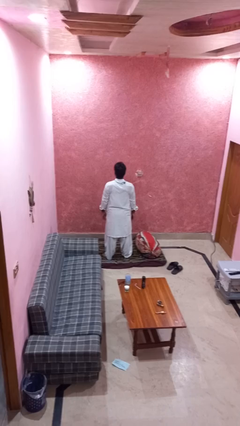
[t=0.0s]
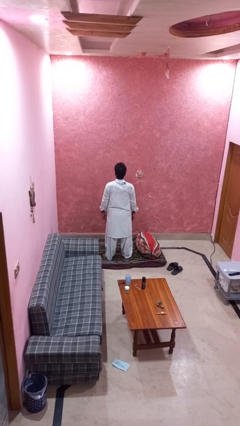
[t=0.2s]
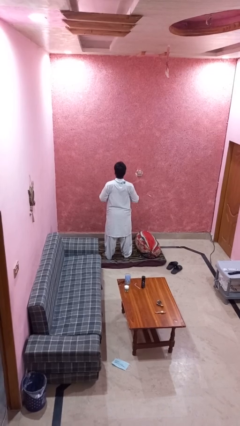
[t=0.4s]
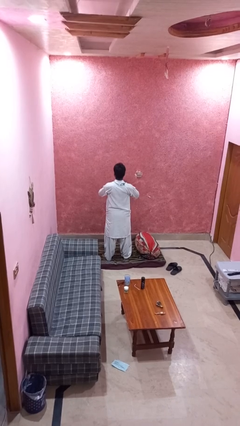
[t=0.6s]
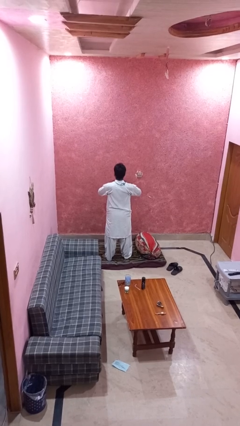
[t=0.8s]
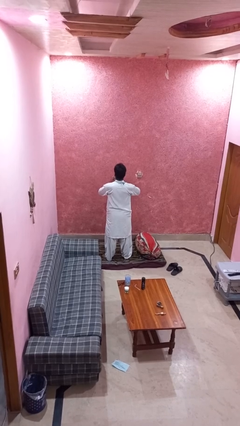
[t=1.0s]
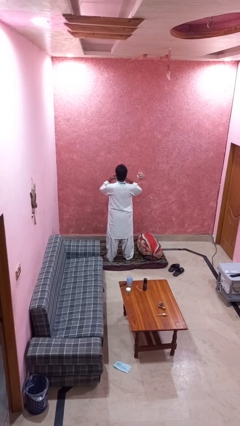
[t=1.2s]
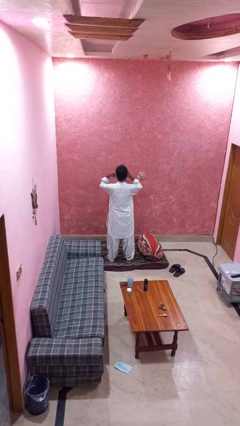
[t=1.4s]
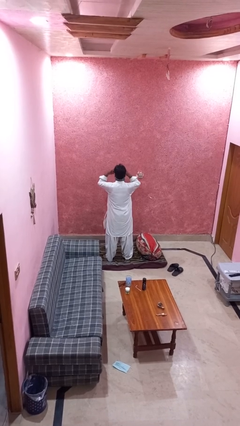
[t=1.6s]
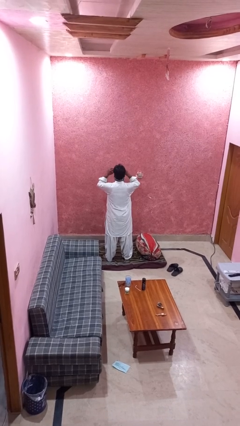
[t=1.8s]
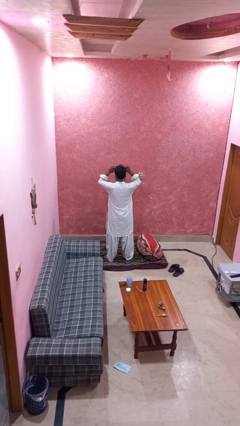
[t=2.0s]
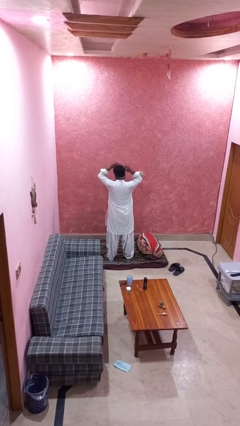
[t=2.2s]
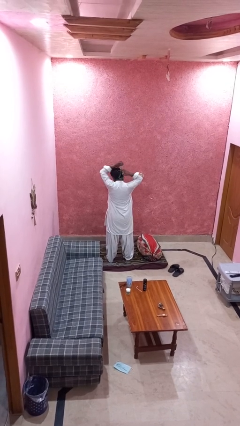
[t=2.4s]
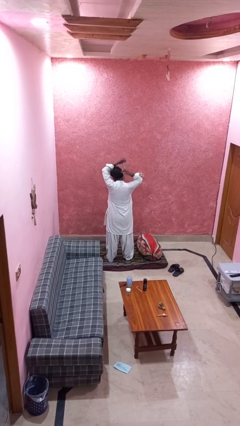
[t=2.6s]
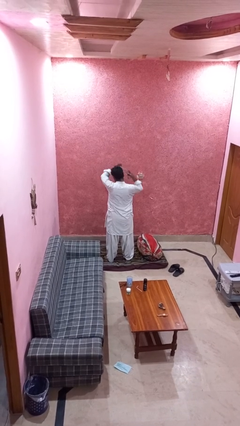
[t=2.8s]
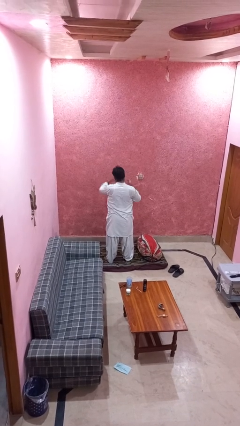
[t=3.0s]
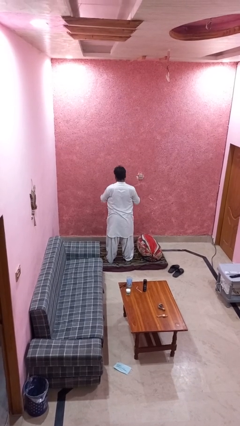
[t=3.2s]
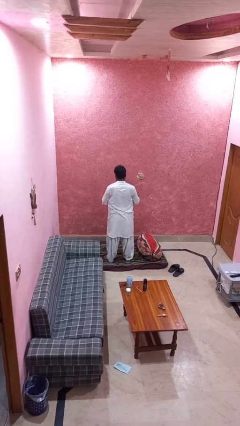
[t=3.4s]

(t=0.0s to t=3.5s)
person takes off necklace

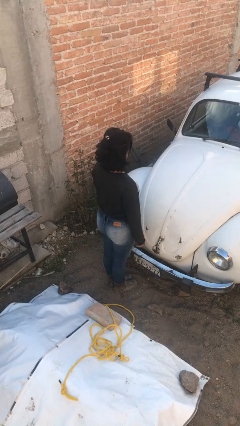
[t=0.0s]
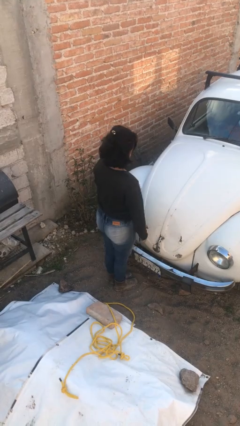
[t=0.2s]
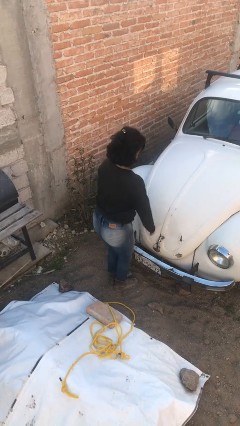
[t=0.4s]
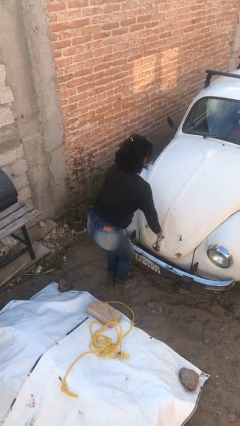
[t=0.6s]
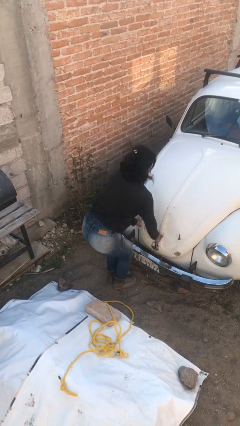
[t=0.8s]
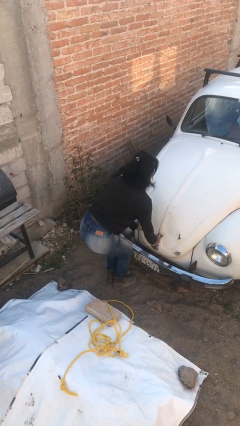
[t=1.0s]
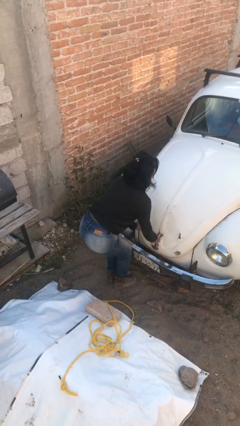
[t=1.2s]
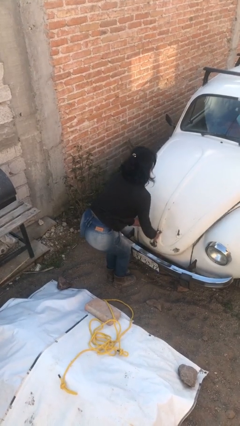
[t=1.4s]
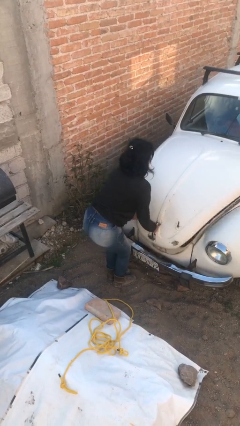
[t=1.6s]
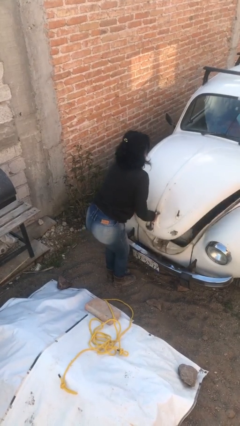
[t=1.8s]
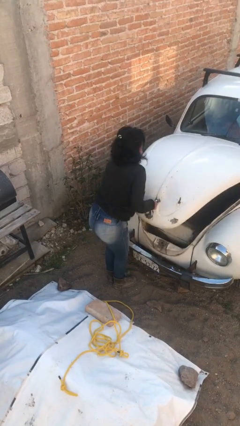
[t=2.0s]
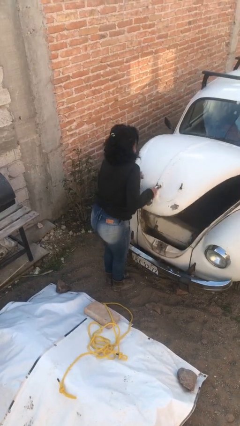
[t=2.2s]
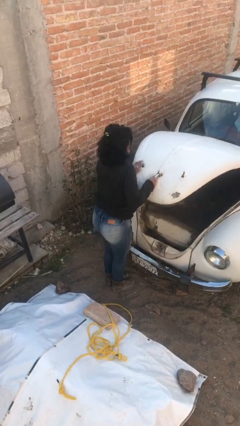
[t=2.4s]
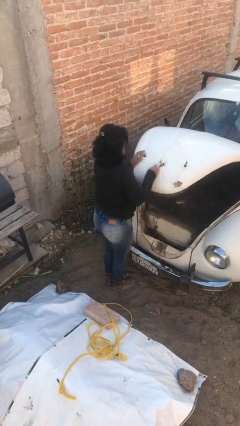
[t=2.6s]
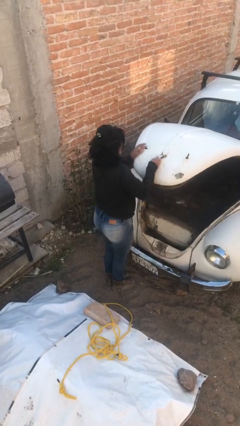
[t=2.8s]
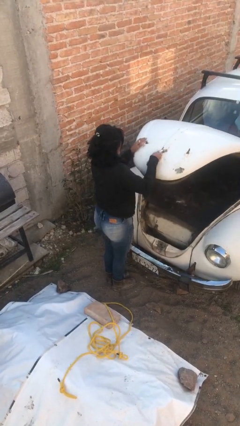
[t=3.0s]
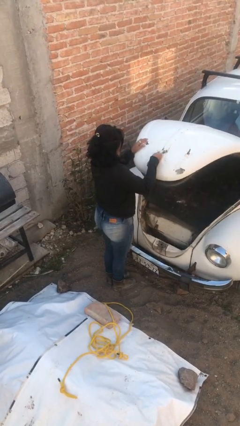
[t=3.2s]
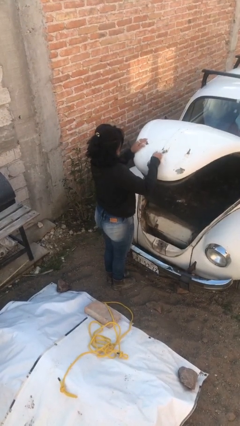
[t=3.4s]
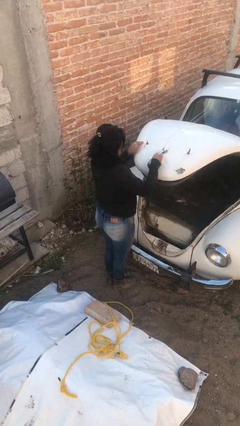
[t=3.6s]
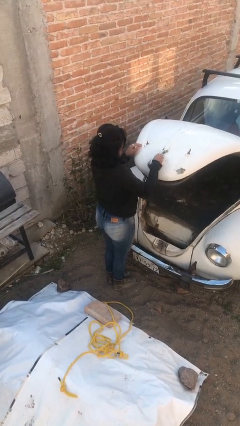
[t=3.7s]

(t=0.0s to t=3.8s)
person opens car trunk

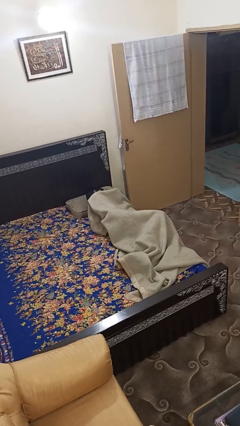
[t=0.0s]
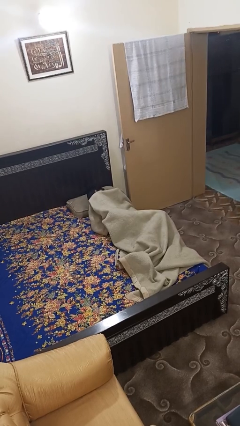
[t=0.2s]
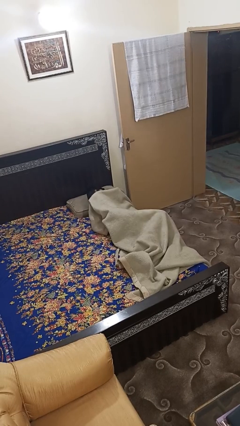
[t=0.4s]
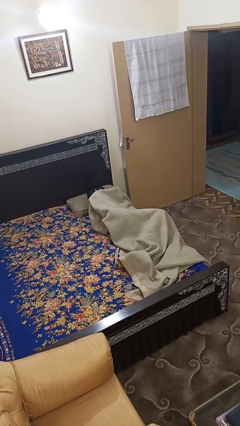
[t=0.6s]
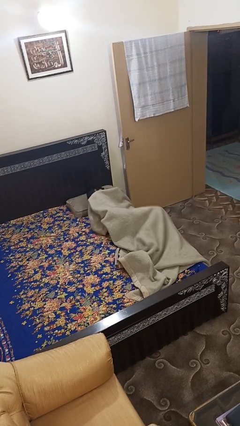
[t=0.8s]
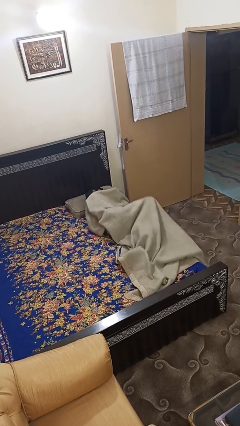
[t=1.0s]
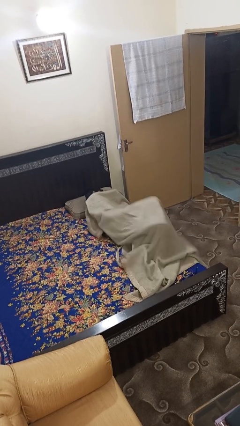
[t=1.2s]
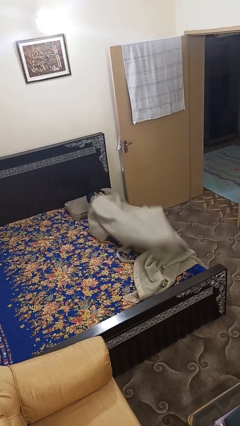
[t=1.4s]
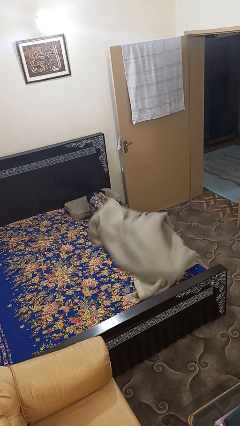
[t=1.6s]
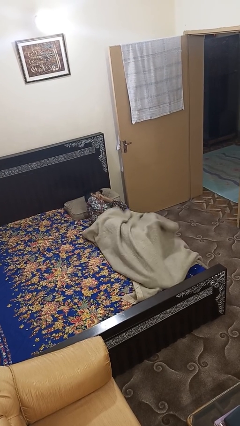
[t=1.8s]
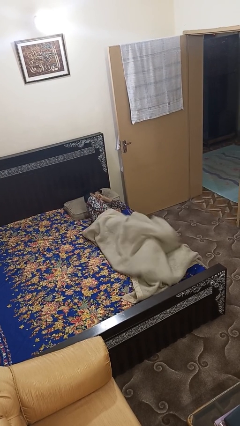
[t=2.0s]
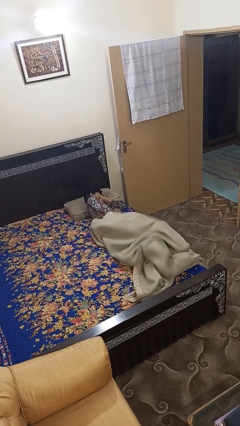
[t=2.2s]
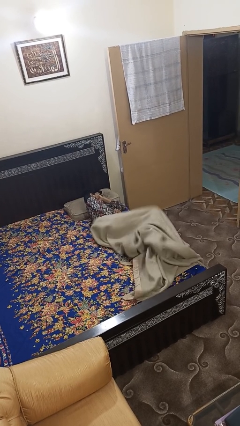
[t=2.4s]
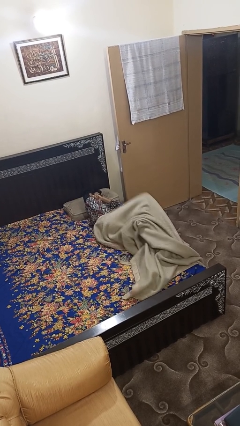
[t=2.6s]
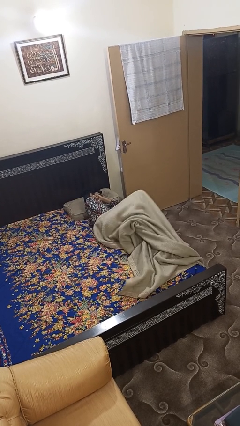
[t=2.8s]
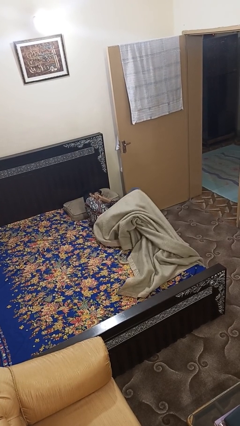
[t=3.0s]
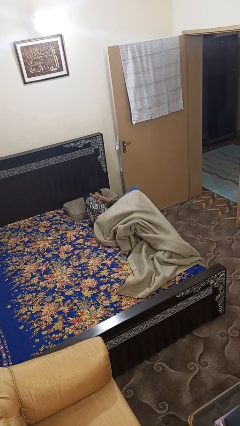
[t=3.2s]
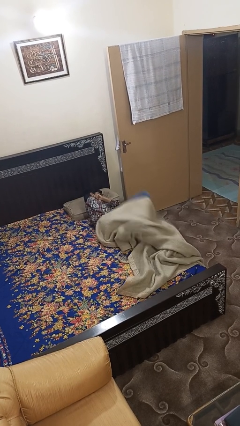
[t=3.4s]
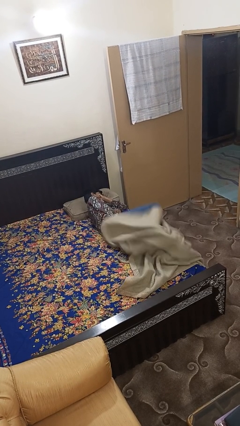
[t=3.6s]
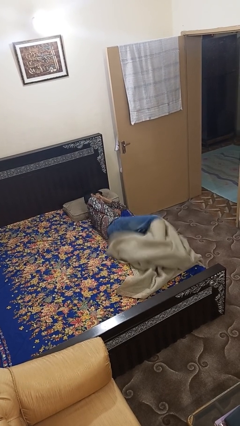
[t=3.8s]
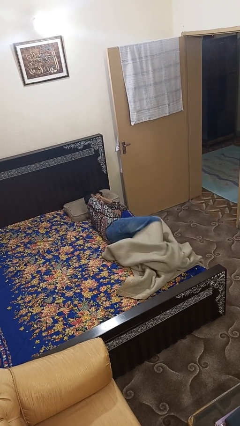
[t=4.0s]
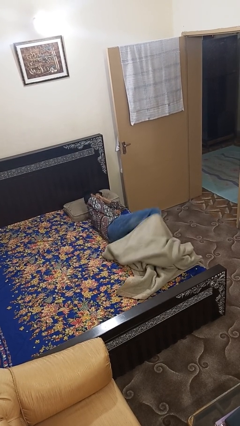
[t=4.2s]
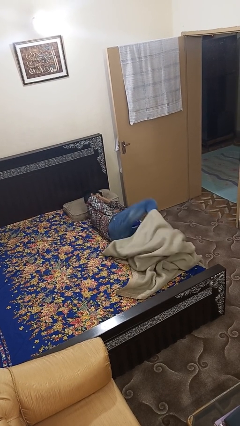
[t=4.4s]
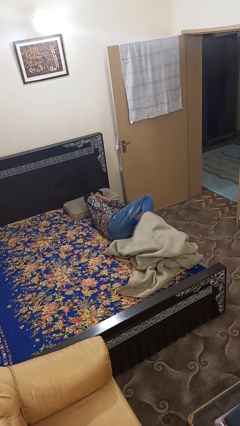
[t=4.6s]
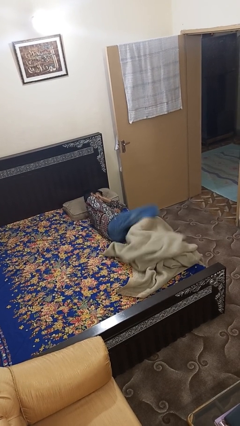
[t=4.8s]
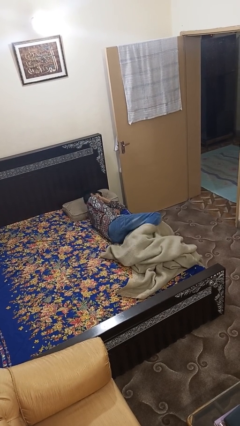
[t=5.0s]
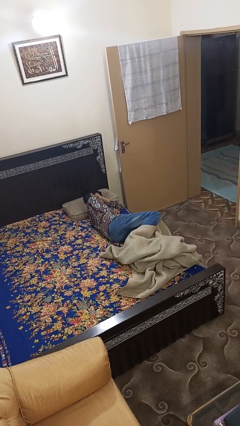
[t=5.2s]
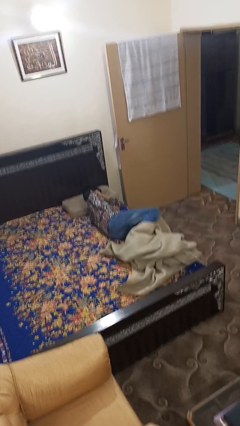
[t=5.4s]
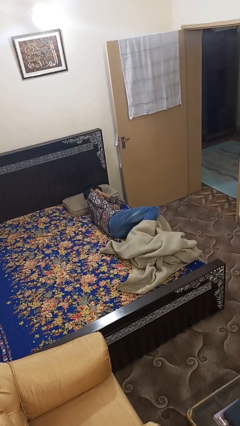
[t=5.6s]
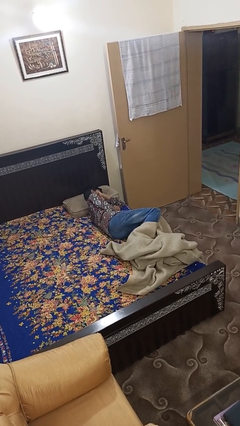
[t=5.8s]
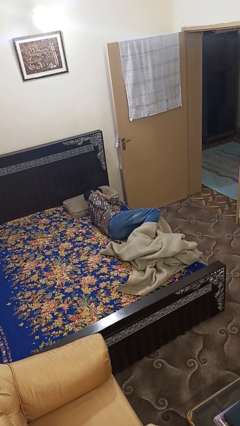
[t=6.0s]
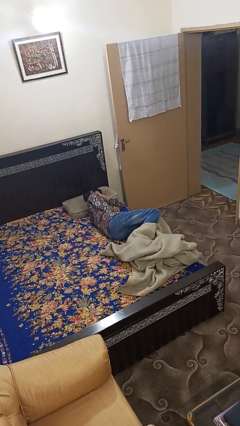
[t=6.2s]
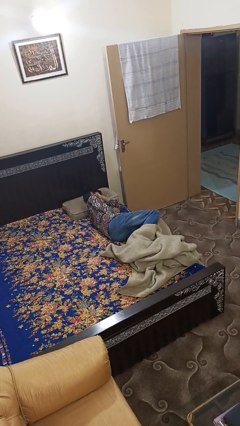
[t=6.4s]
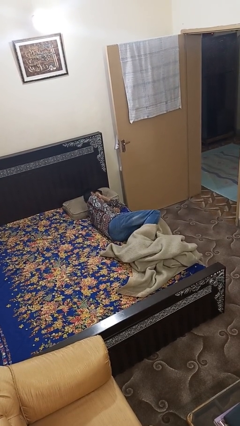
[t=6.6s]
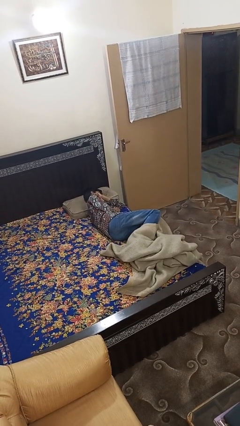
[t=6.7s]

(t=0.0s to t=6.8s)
person uncovers with bedsheets

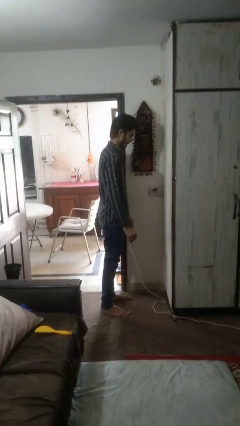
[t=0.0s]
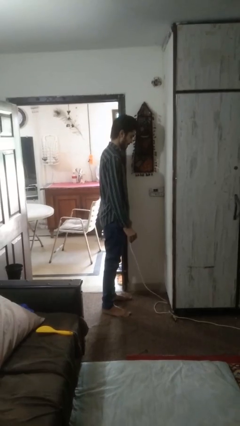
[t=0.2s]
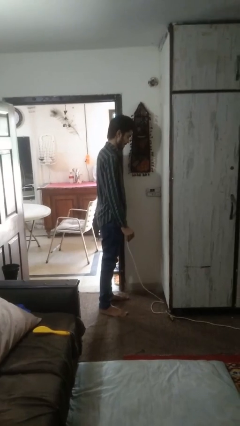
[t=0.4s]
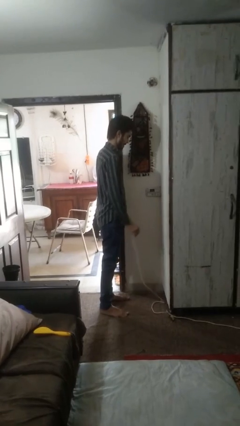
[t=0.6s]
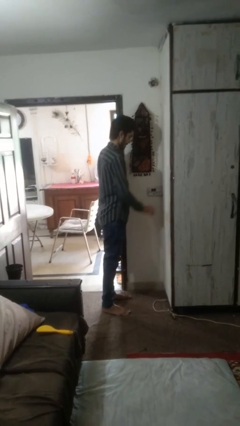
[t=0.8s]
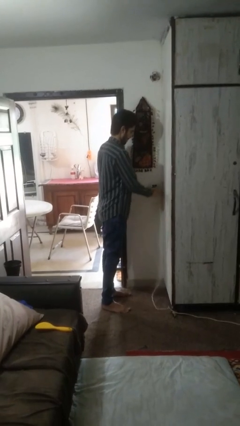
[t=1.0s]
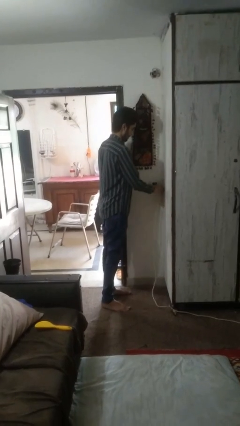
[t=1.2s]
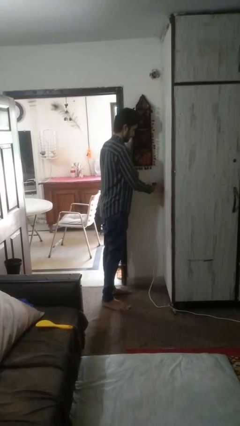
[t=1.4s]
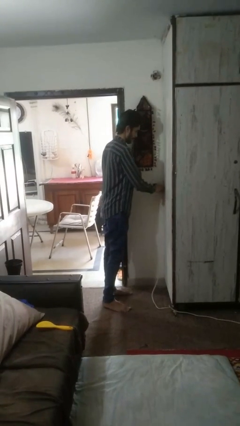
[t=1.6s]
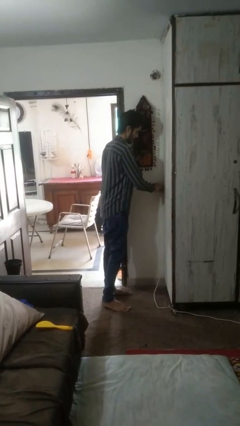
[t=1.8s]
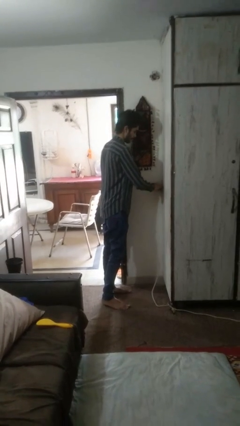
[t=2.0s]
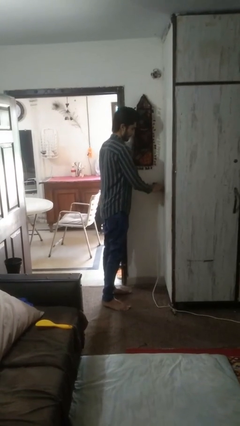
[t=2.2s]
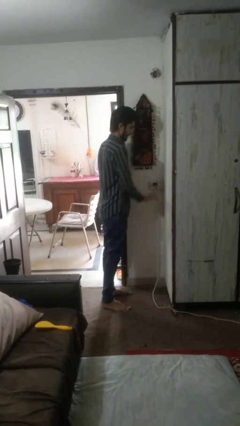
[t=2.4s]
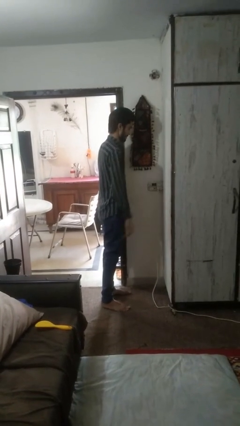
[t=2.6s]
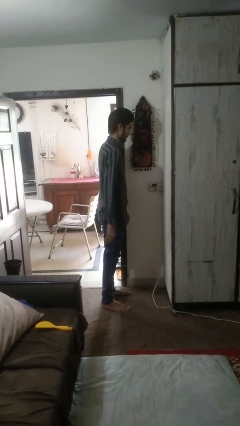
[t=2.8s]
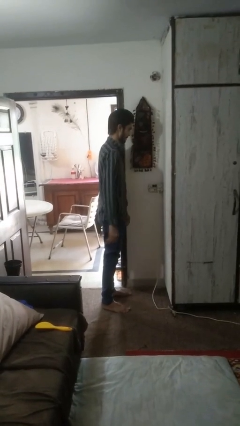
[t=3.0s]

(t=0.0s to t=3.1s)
person plugs into electrical socket

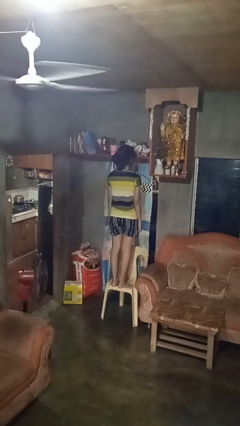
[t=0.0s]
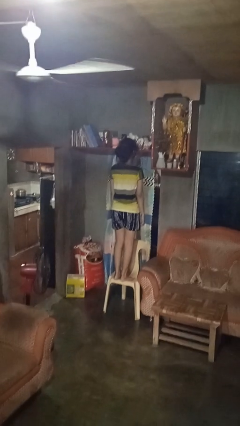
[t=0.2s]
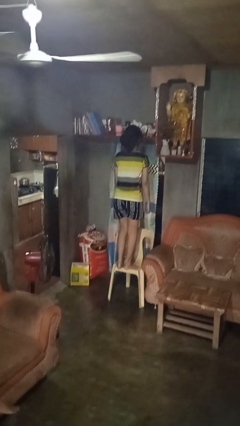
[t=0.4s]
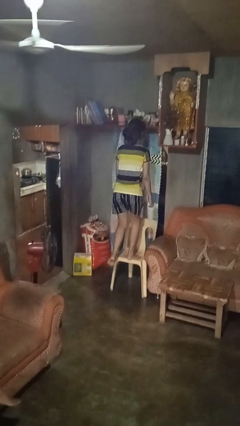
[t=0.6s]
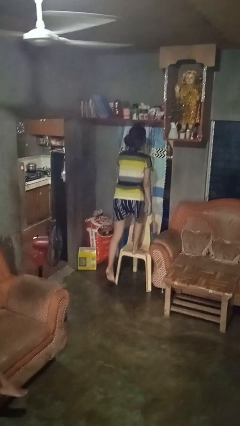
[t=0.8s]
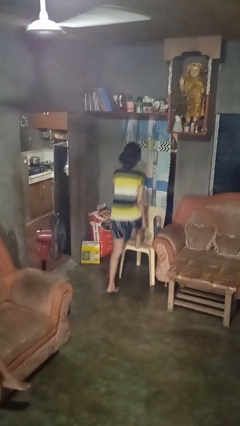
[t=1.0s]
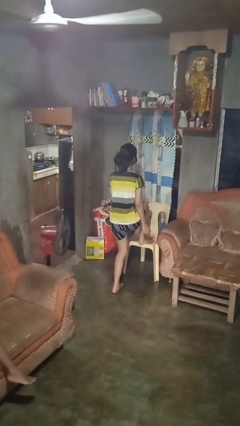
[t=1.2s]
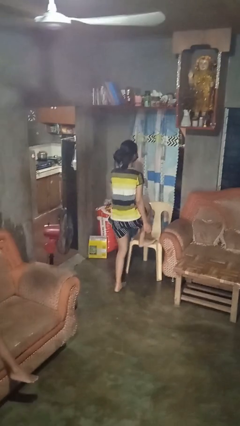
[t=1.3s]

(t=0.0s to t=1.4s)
person climbs off chair
